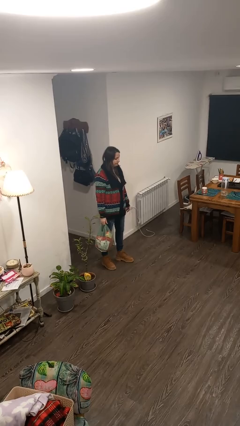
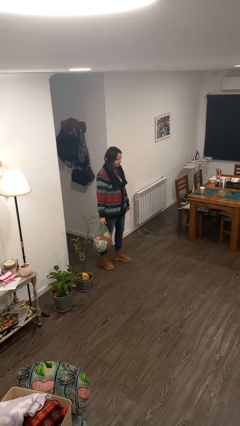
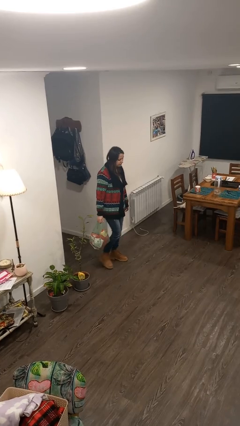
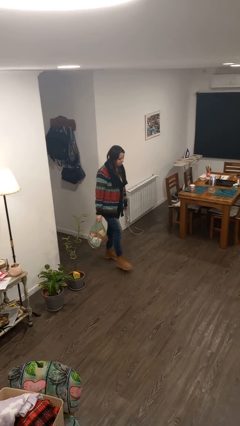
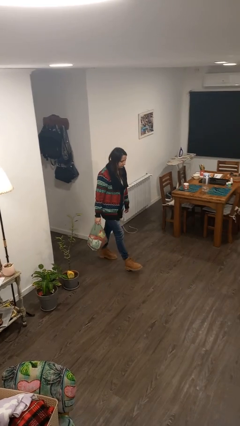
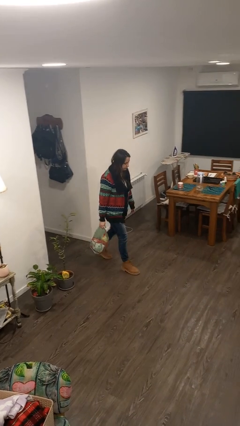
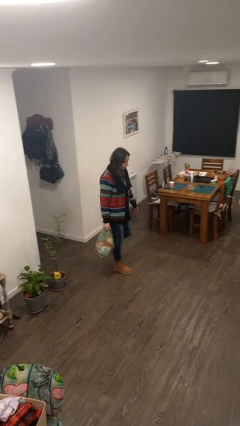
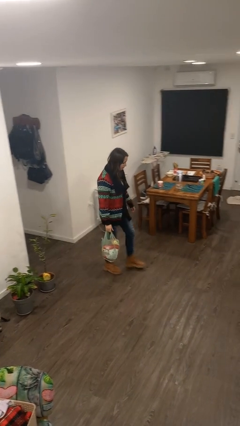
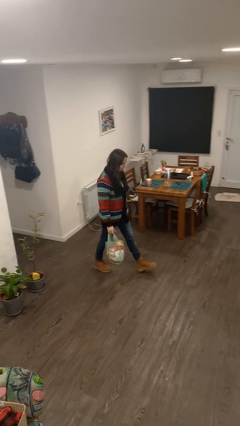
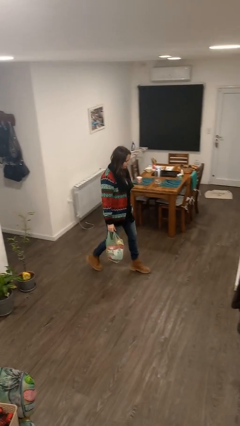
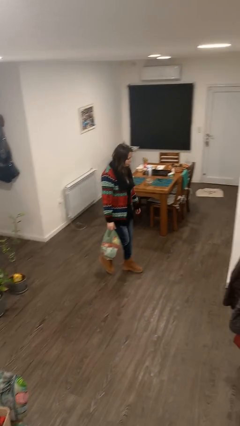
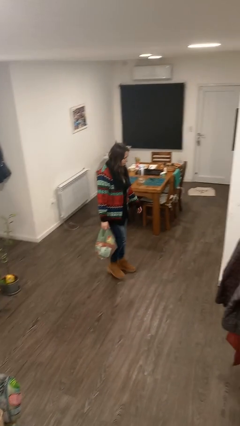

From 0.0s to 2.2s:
person carries groceries

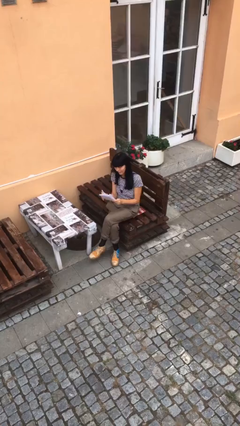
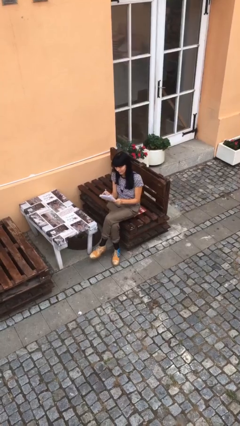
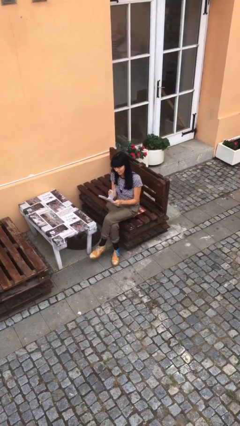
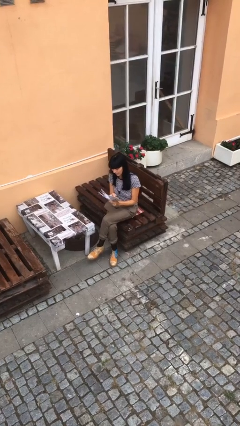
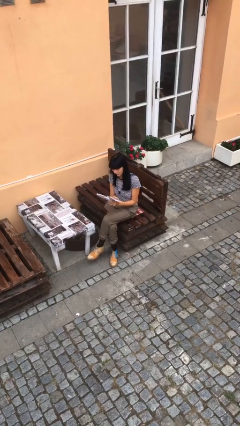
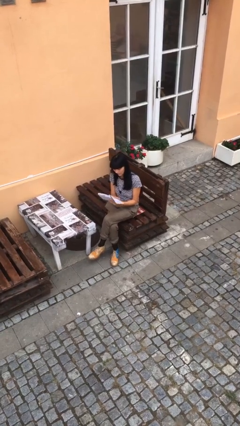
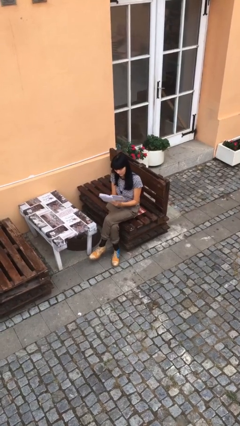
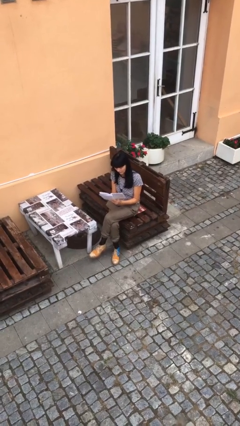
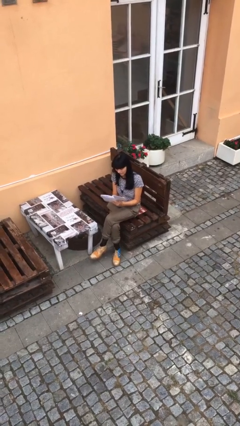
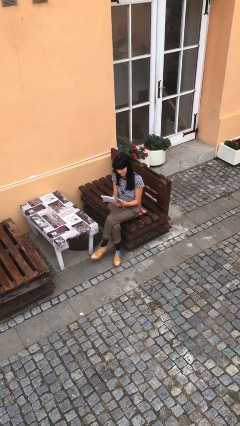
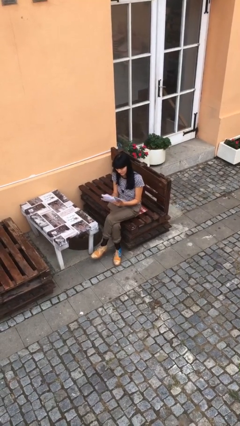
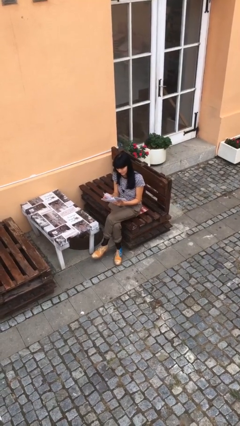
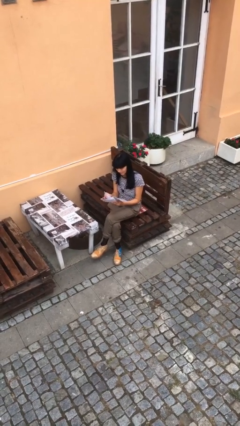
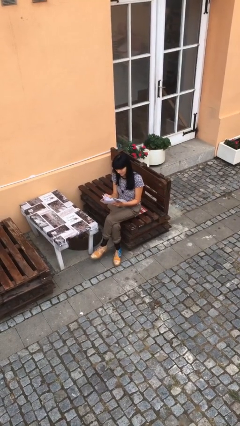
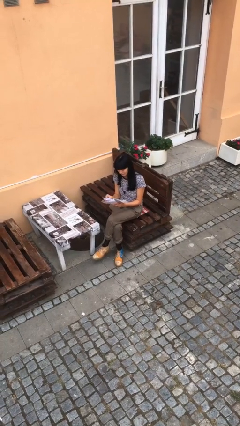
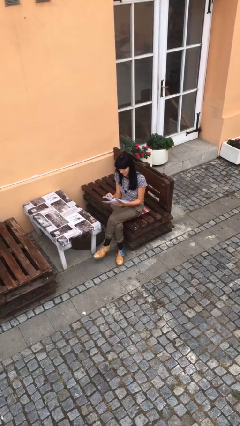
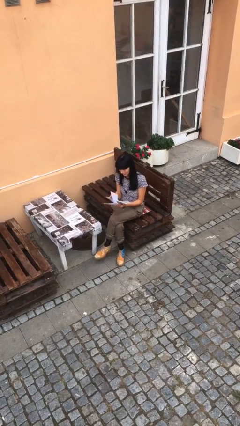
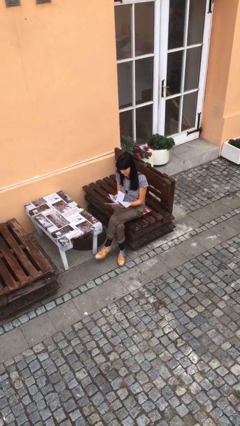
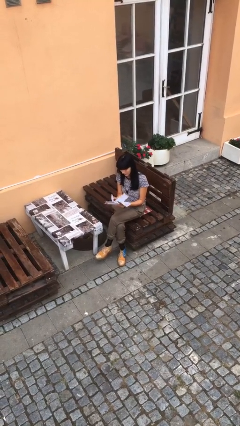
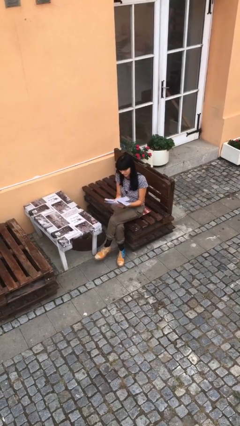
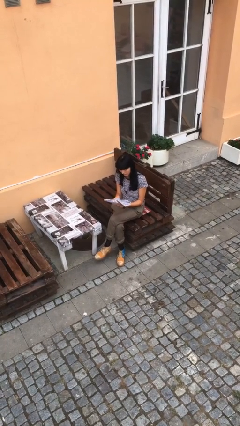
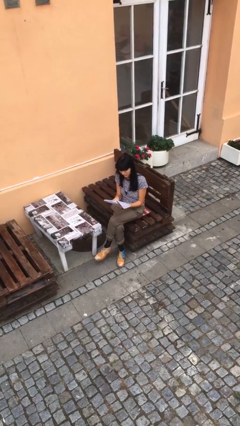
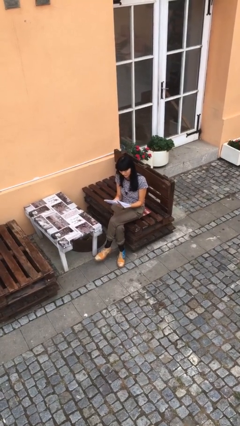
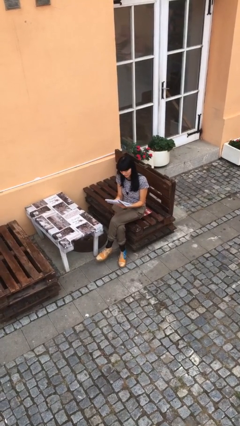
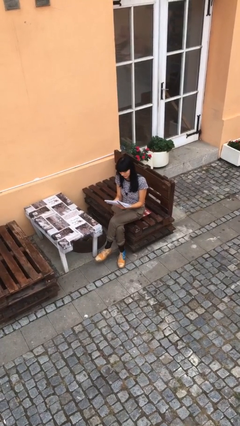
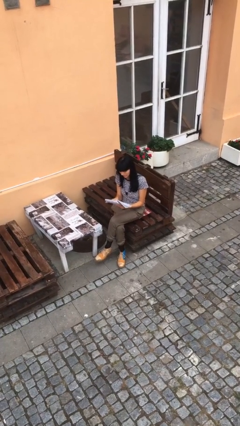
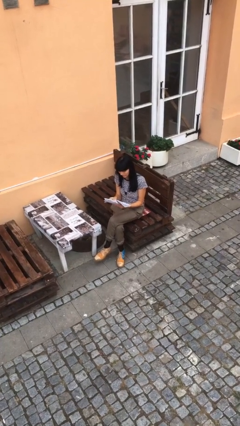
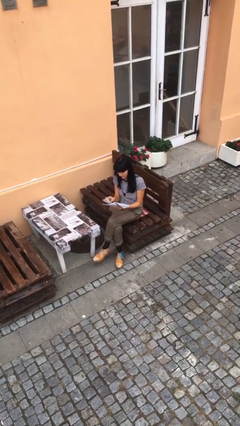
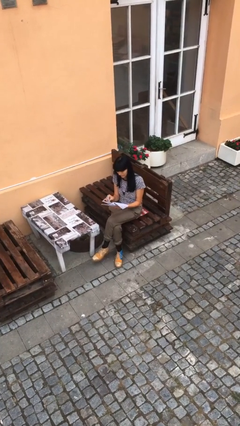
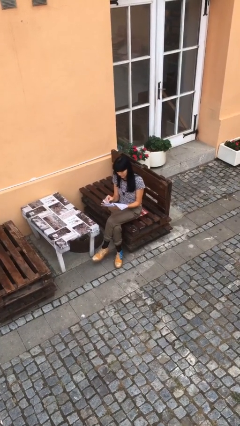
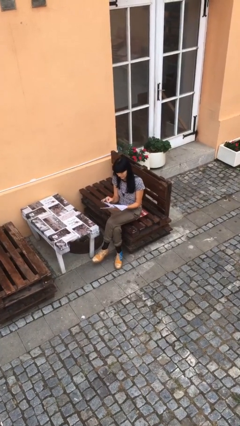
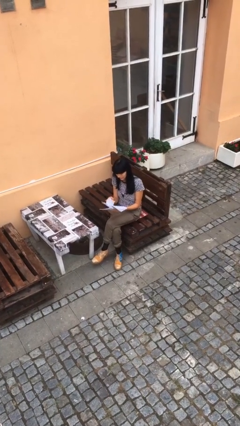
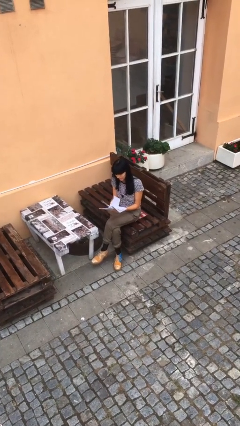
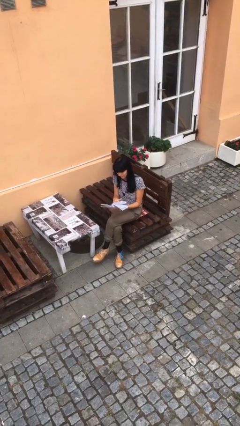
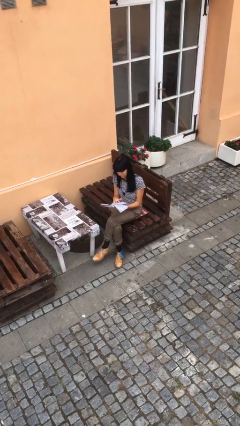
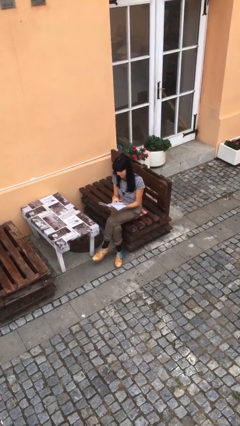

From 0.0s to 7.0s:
person reads document

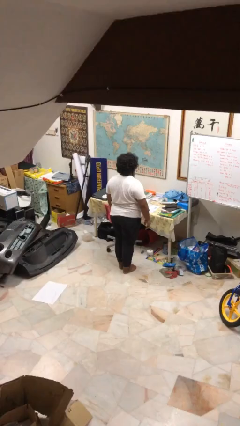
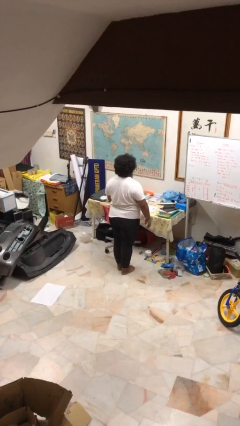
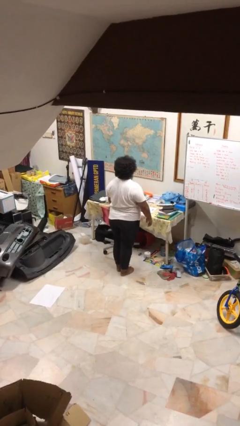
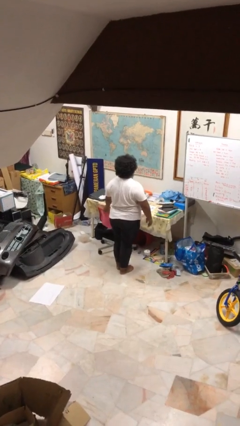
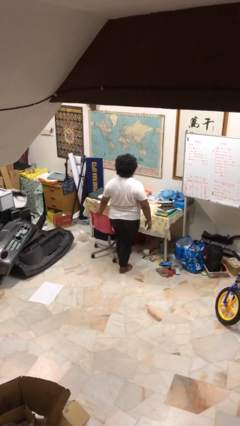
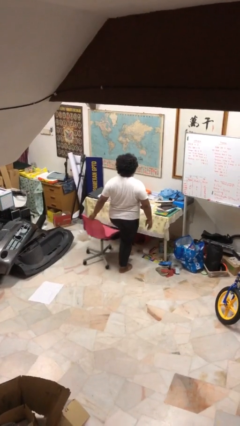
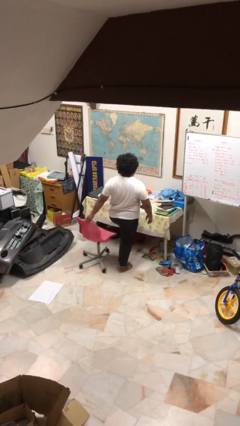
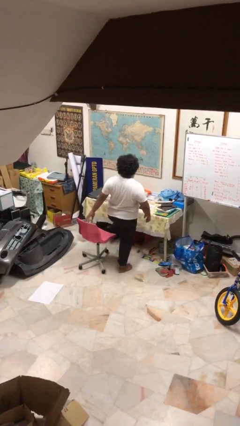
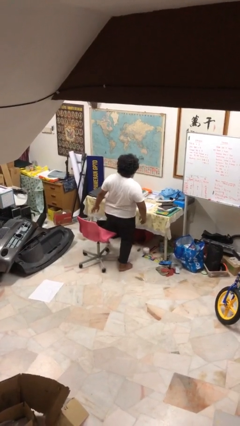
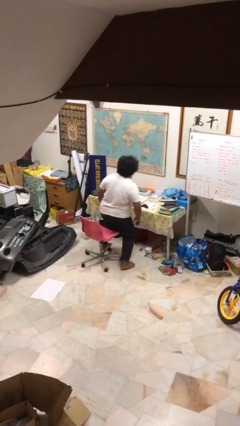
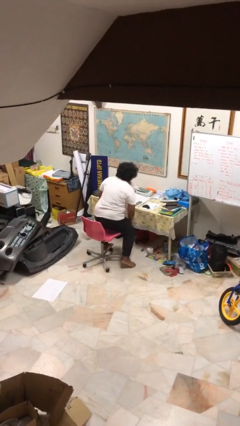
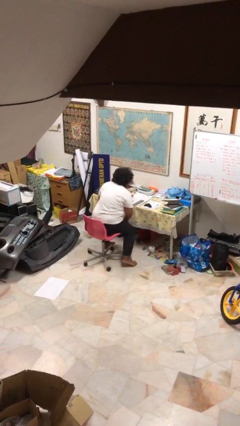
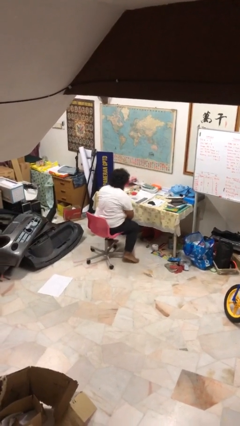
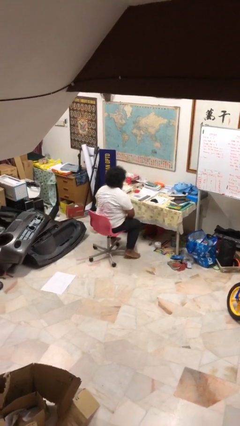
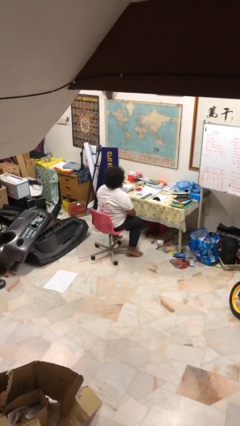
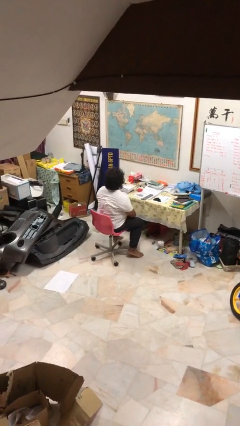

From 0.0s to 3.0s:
person sits down

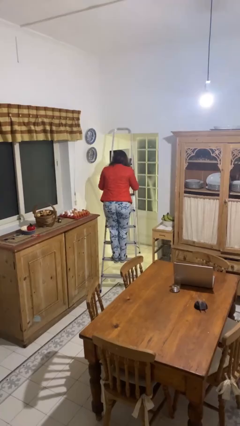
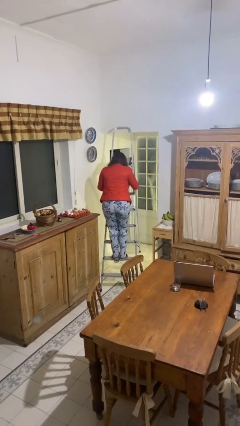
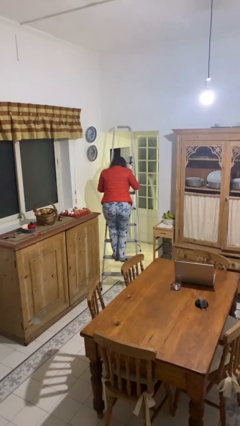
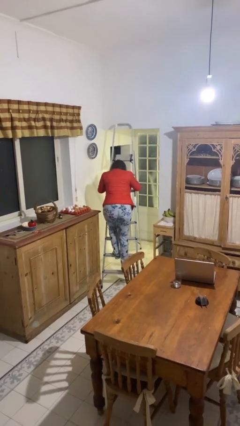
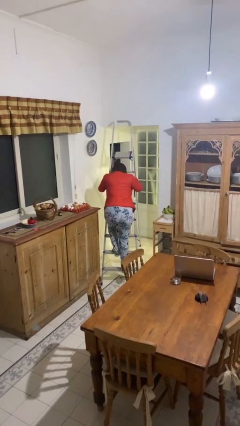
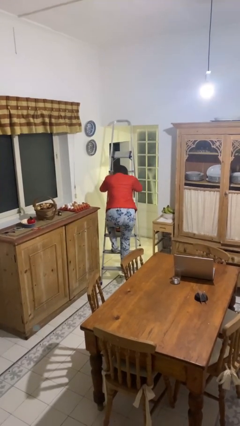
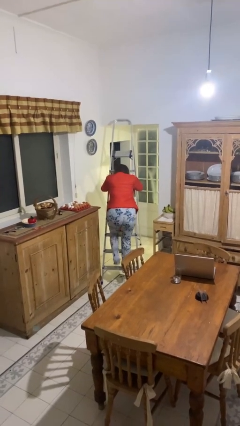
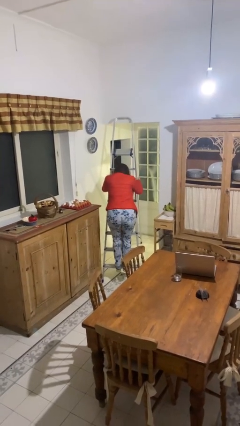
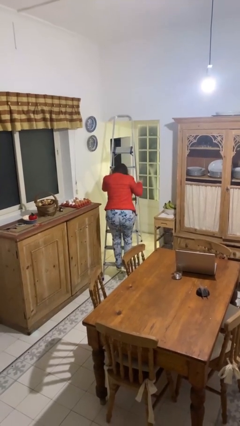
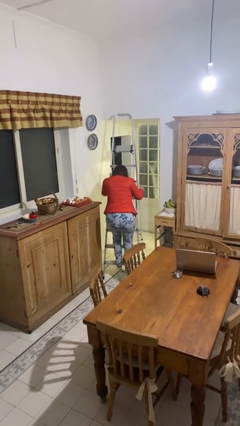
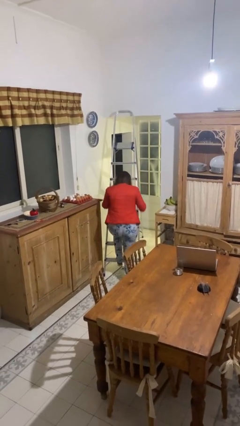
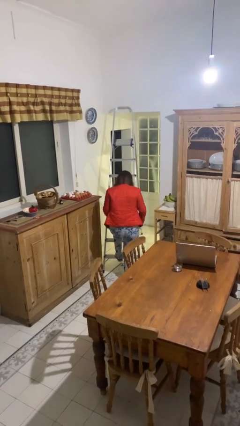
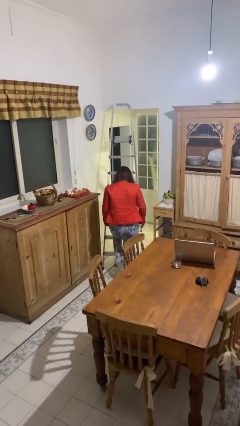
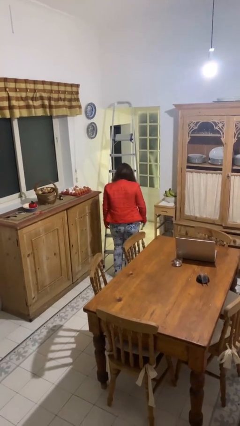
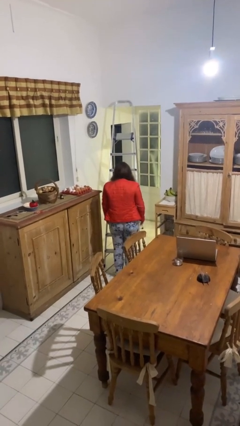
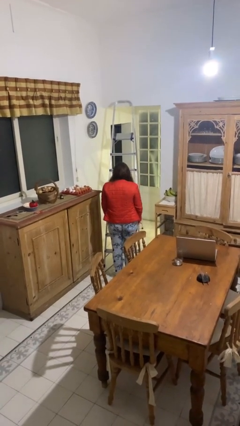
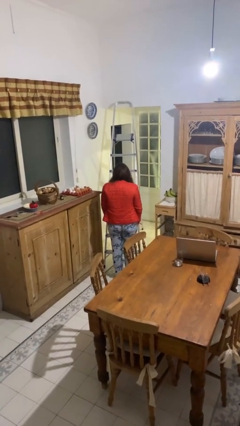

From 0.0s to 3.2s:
person climbs down ladder

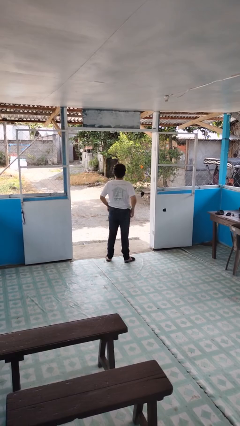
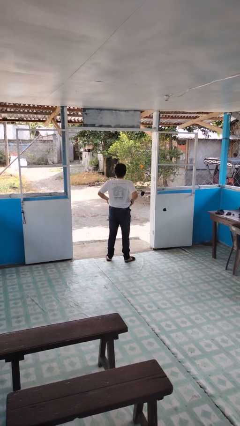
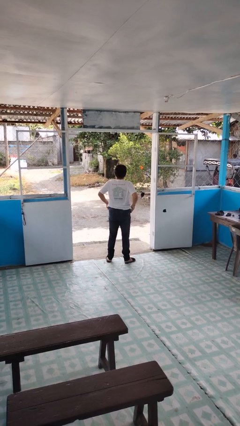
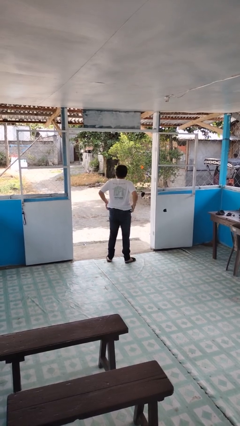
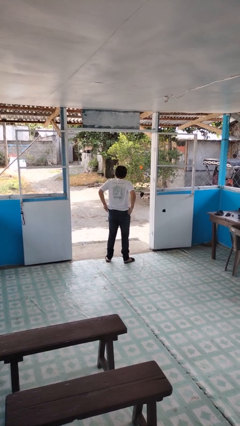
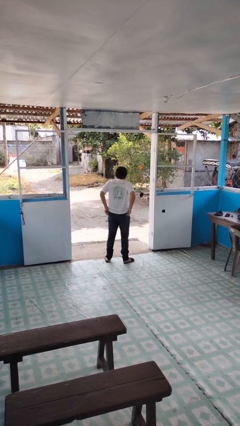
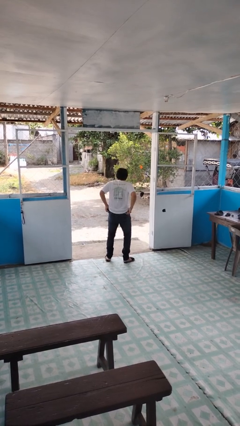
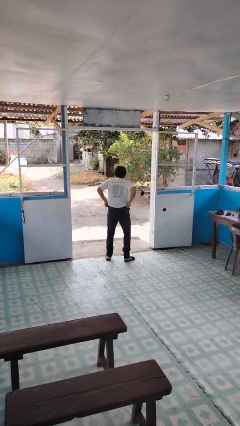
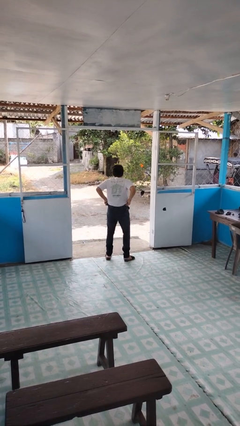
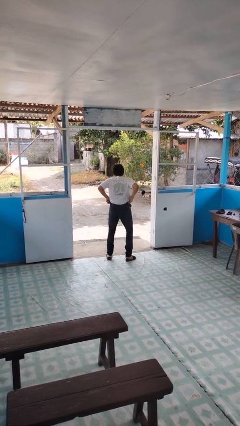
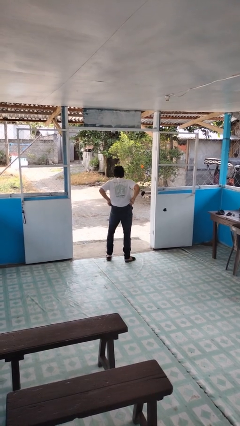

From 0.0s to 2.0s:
person hikes up pants
